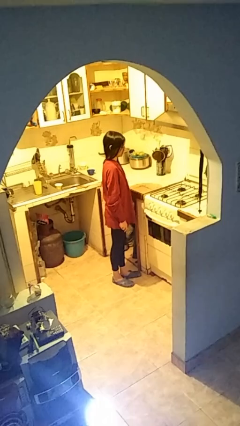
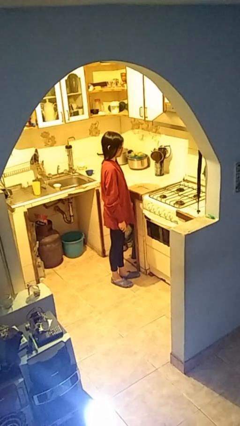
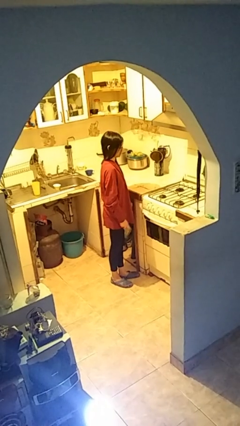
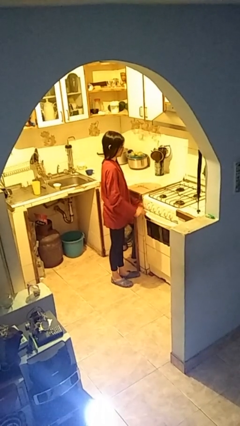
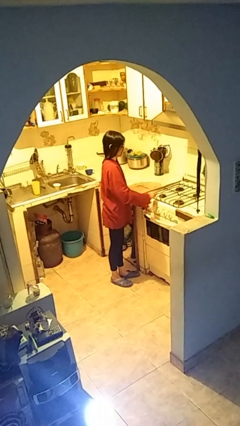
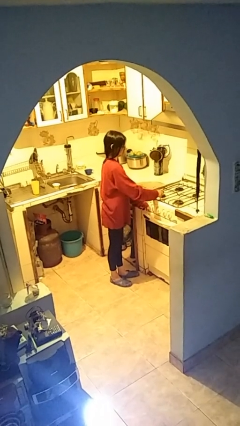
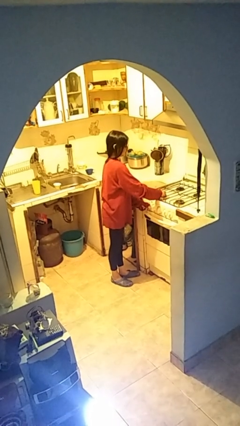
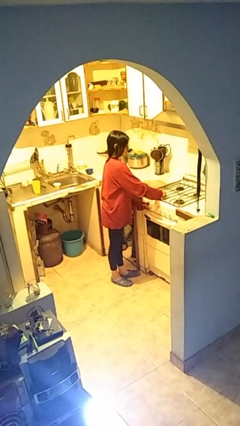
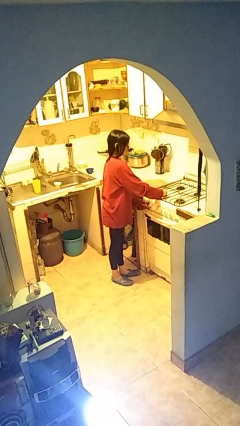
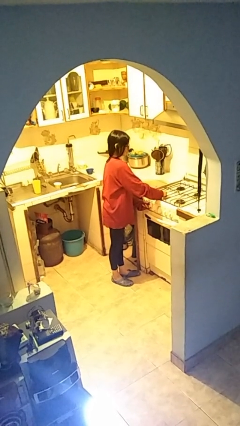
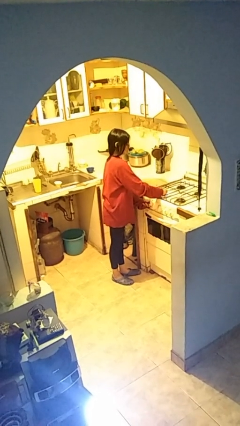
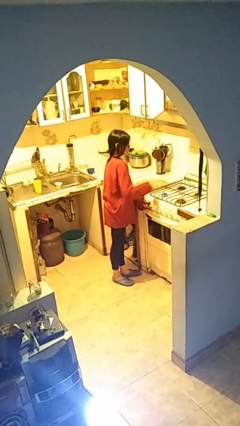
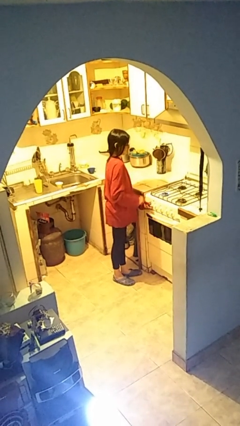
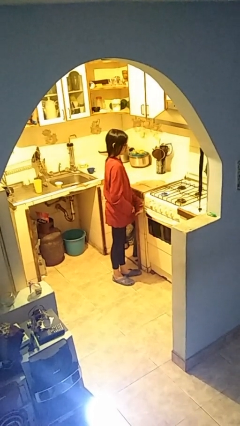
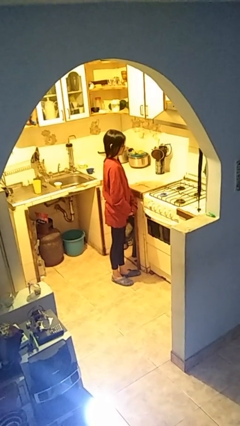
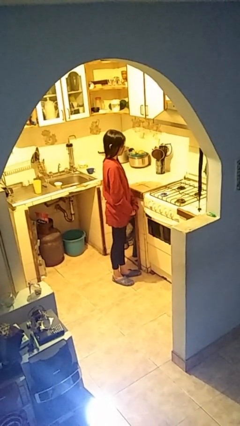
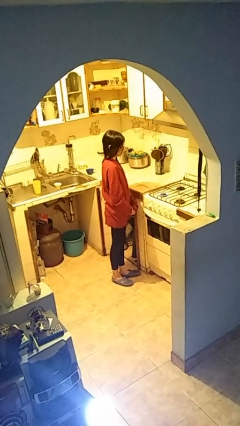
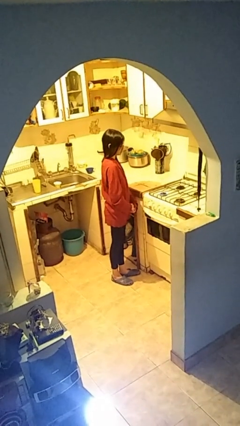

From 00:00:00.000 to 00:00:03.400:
person turns on stovetop

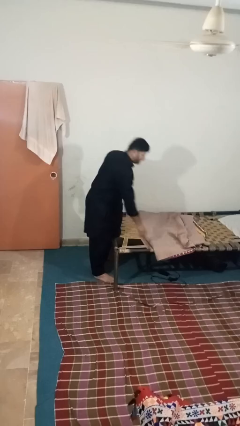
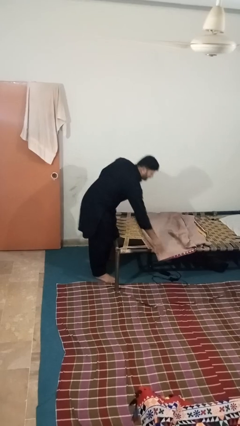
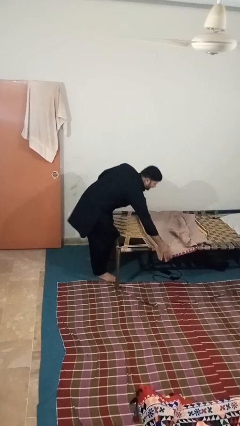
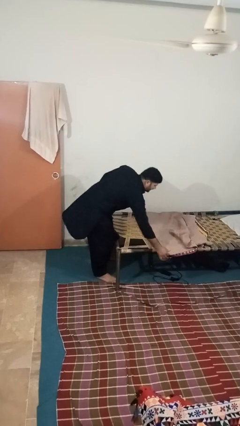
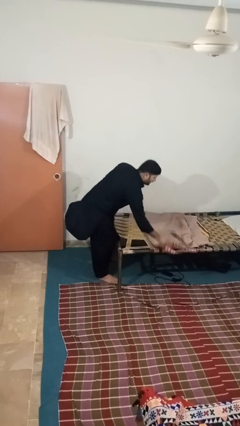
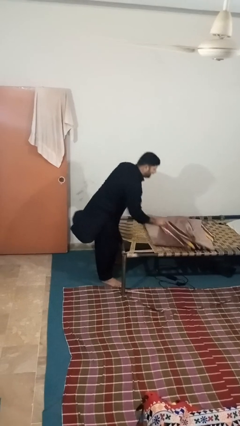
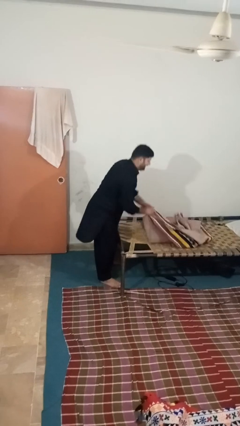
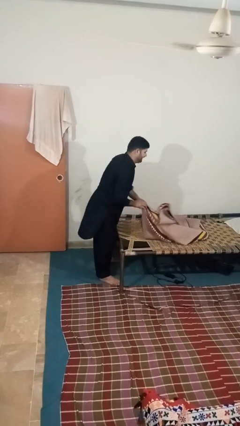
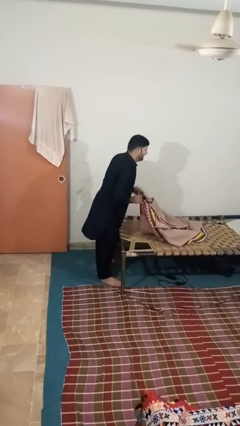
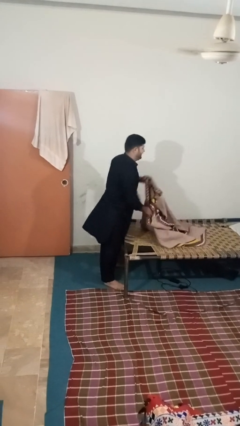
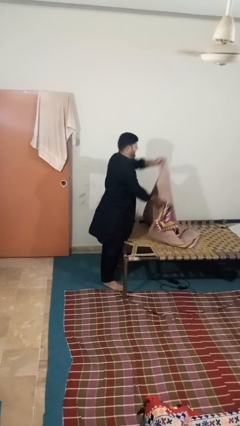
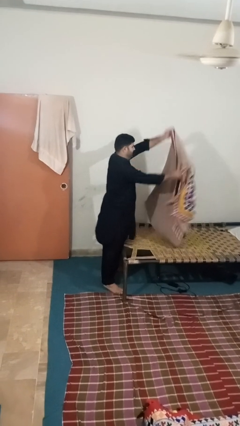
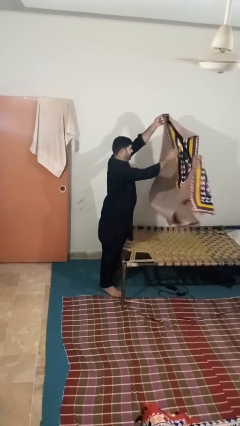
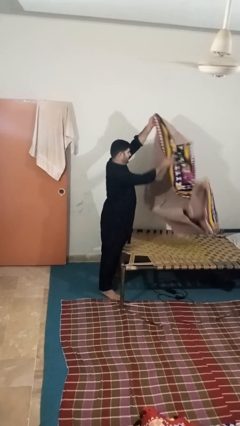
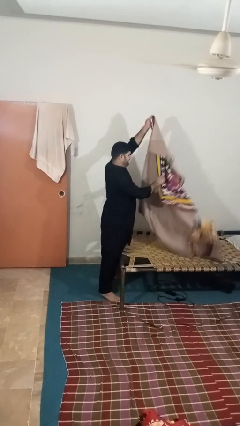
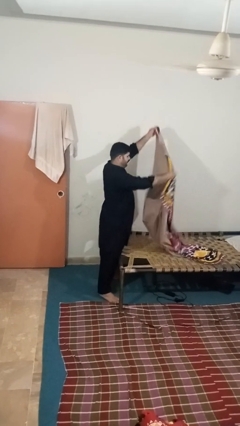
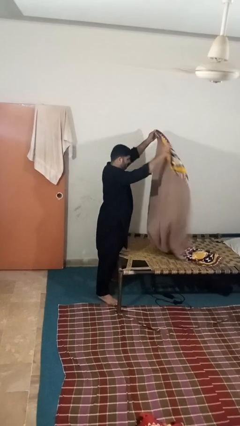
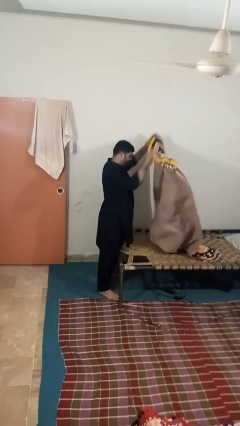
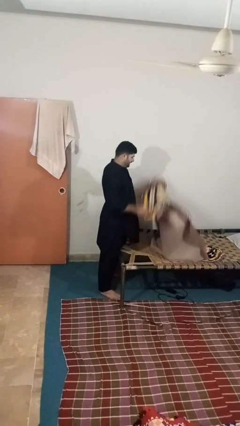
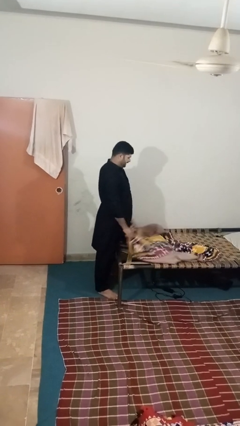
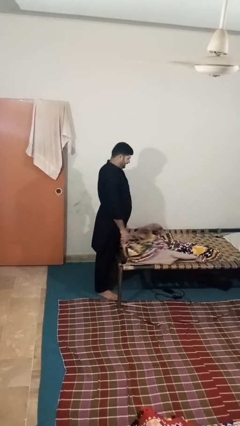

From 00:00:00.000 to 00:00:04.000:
person unfolds blanket

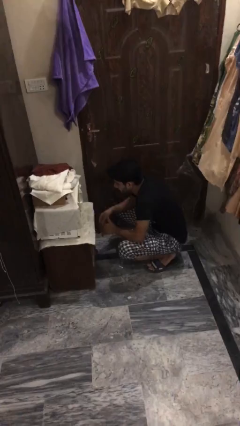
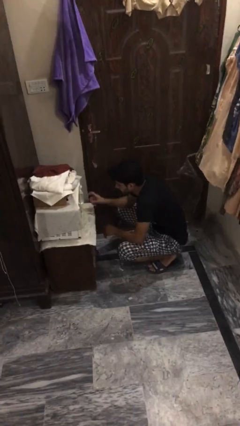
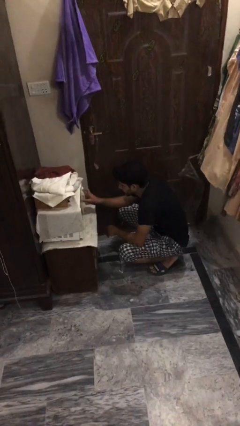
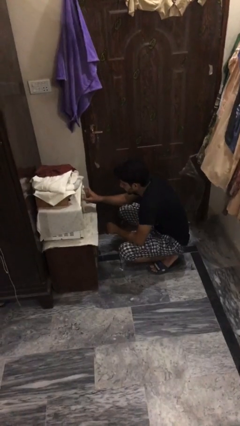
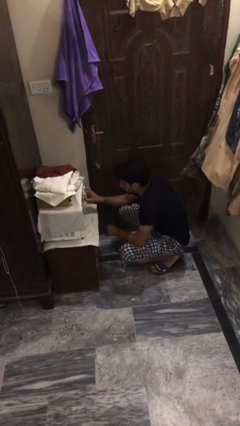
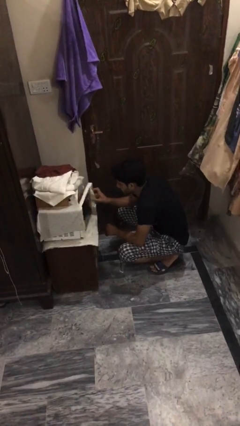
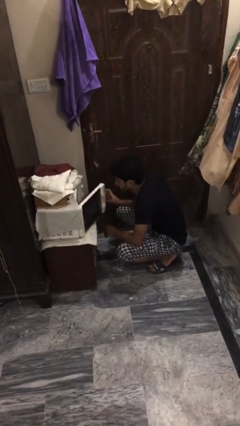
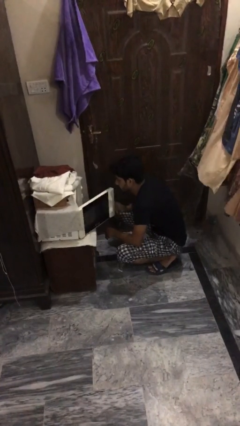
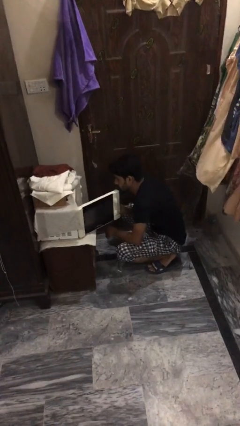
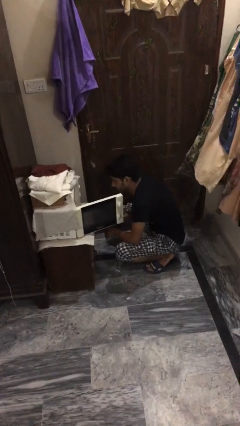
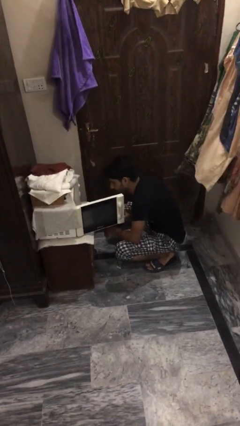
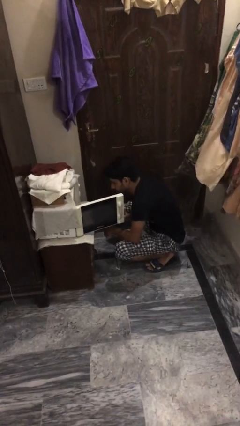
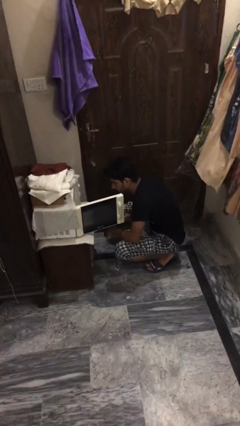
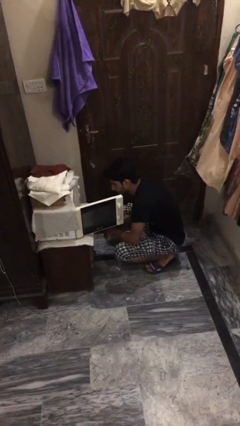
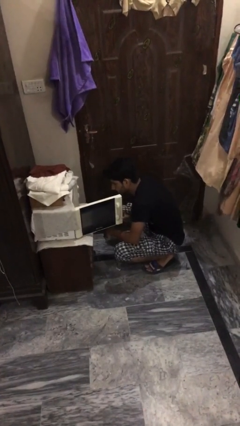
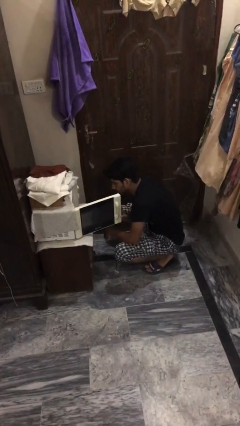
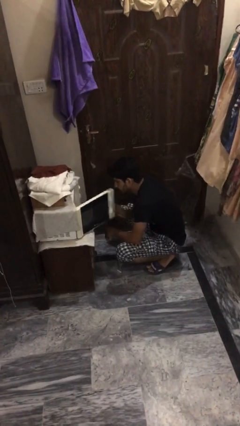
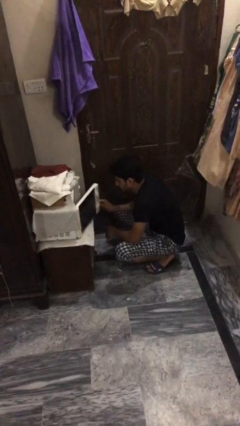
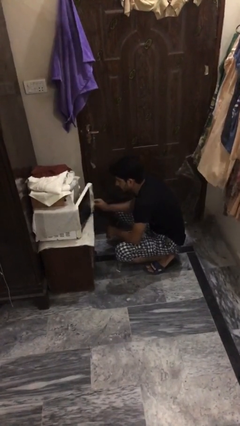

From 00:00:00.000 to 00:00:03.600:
person opens oven door

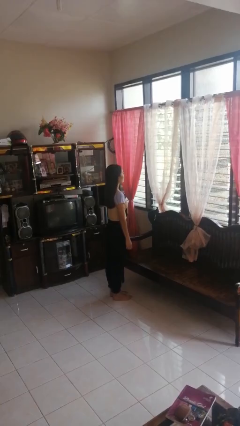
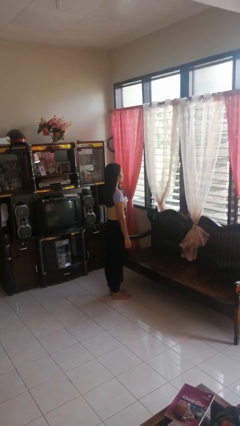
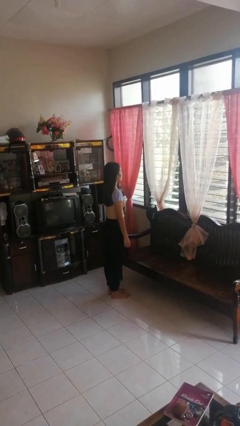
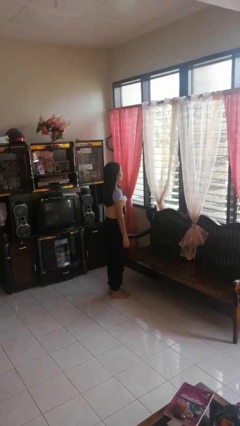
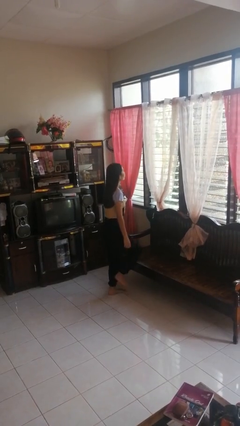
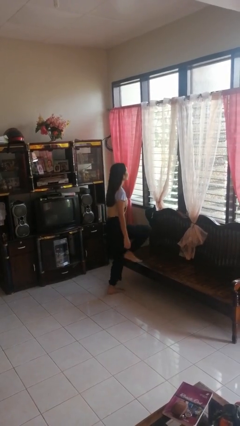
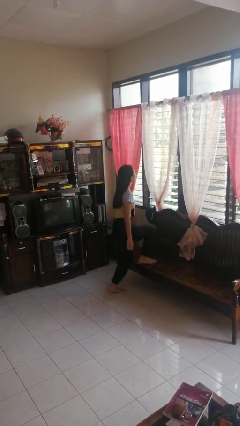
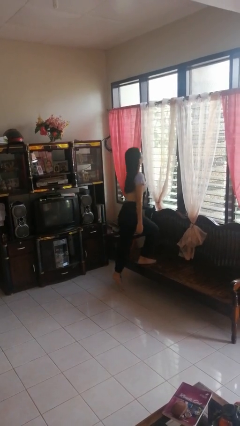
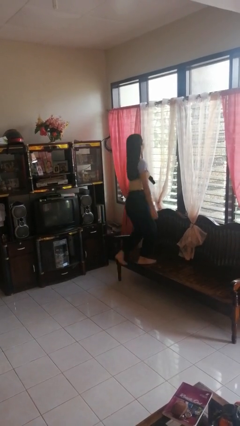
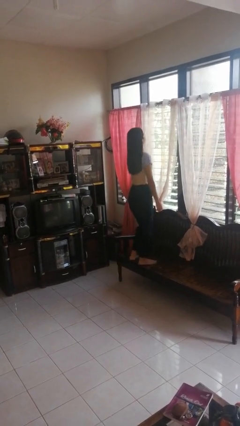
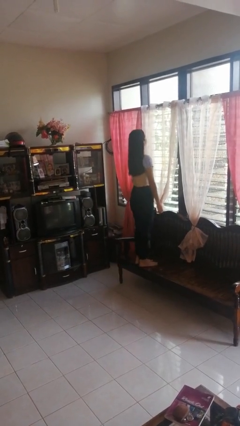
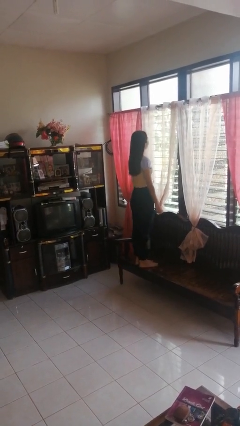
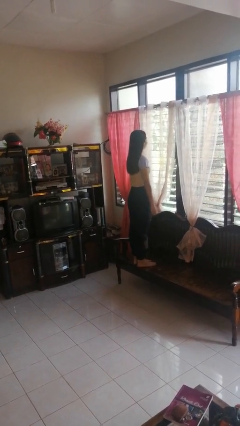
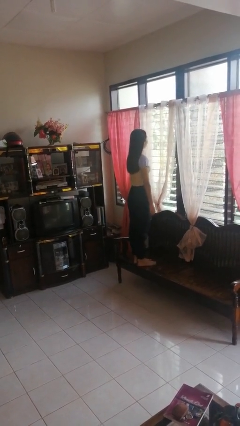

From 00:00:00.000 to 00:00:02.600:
person climbs on couch

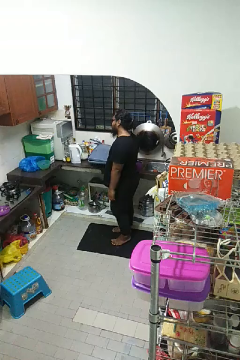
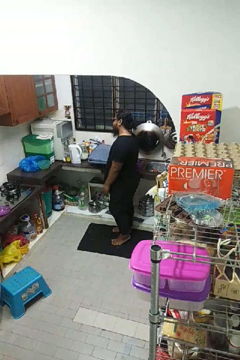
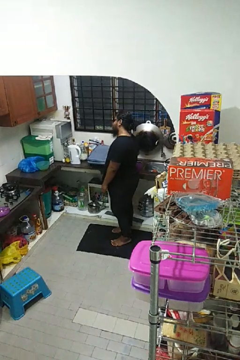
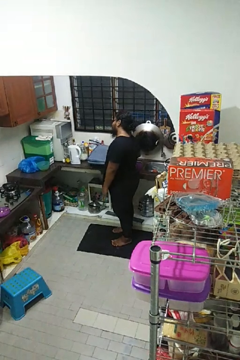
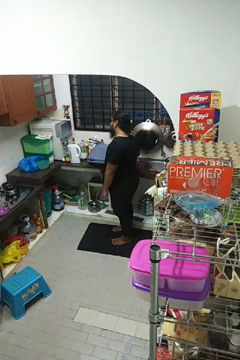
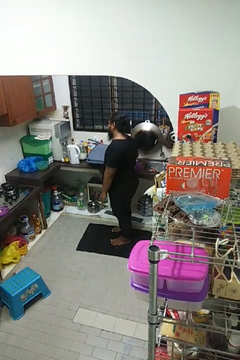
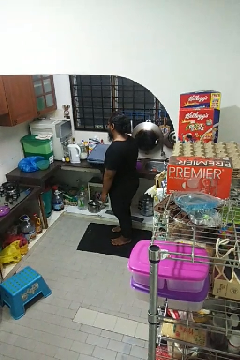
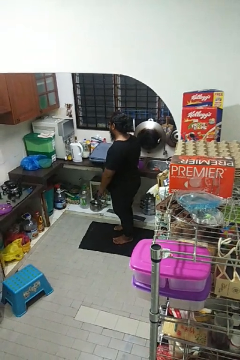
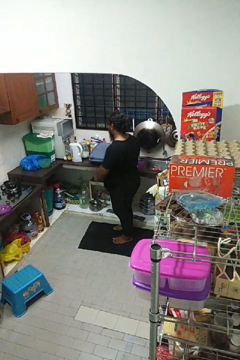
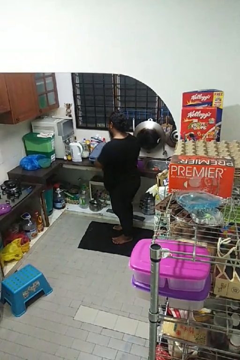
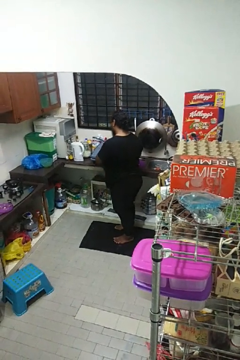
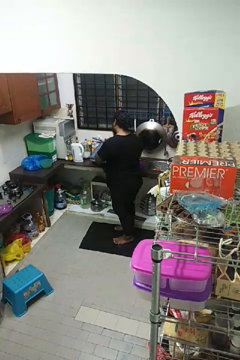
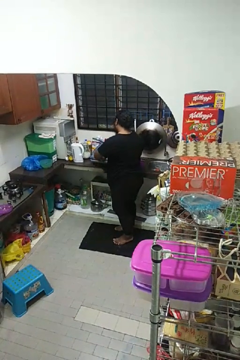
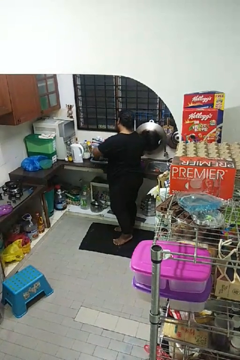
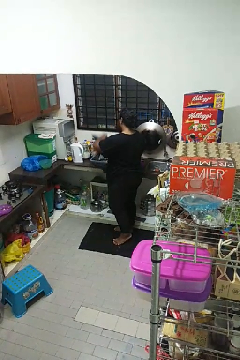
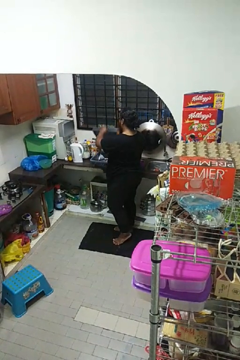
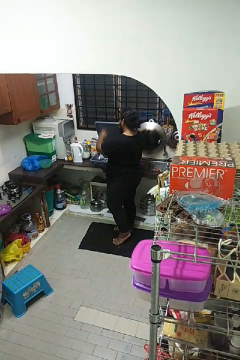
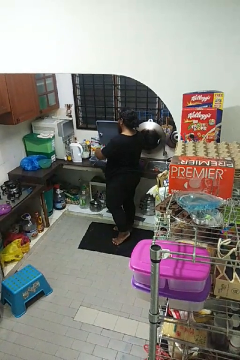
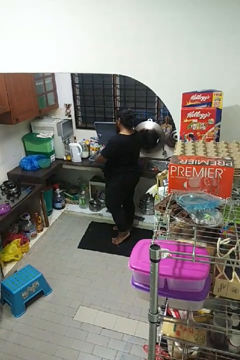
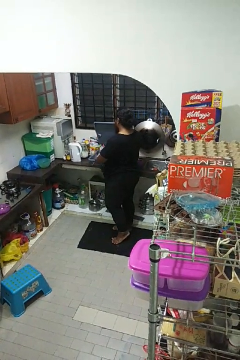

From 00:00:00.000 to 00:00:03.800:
person opens dishwasher

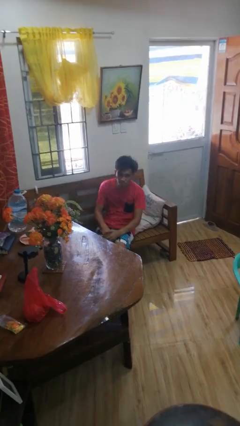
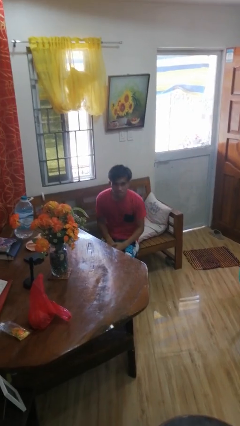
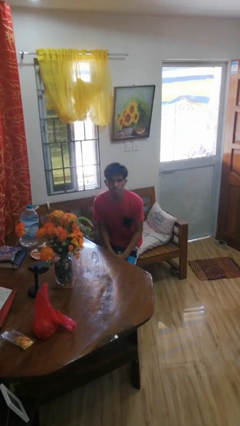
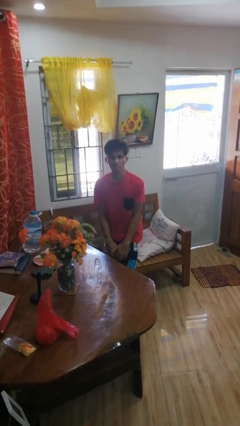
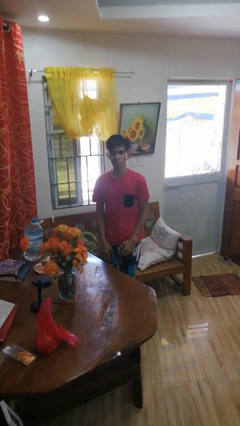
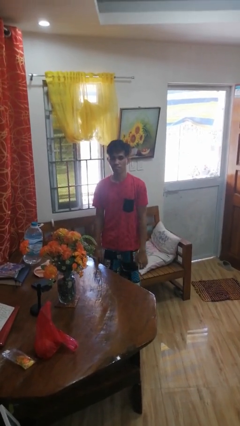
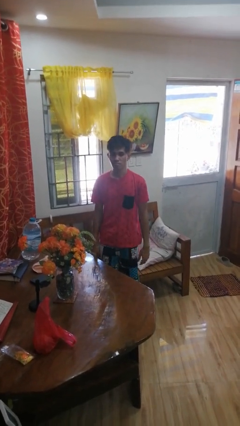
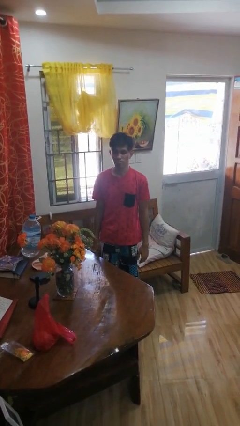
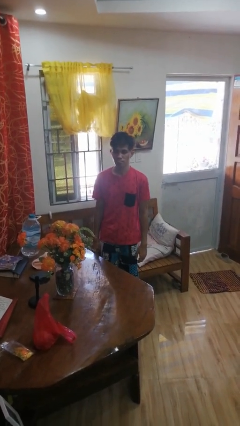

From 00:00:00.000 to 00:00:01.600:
person stands up
